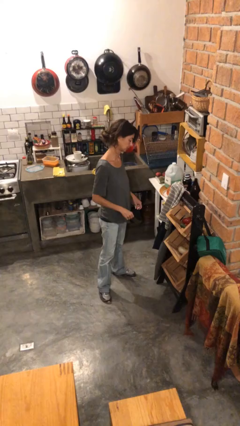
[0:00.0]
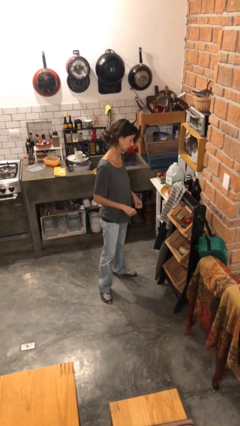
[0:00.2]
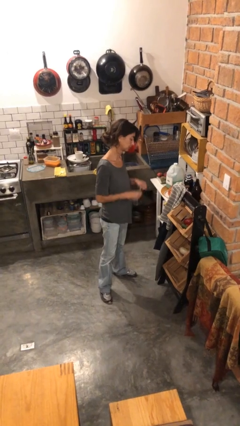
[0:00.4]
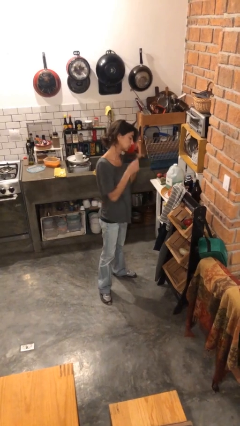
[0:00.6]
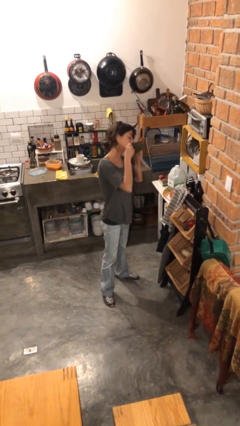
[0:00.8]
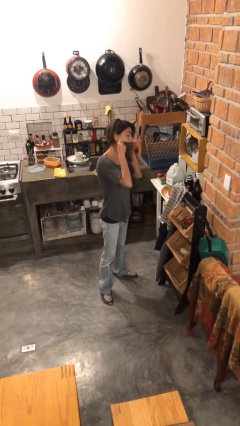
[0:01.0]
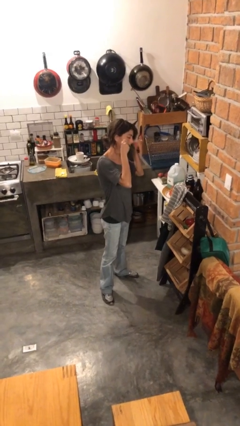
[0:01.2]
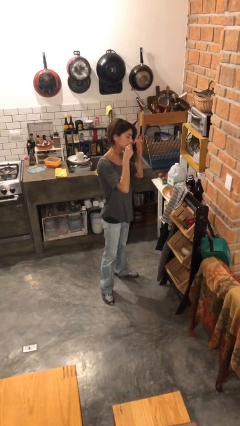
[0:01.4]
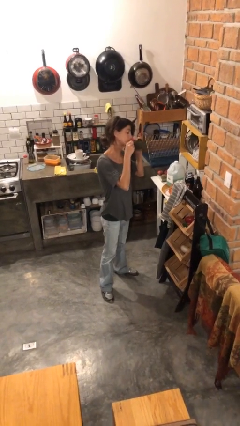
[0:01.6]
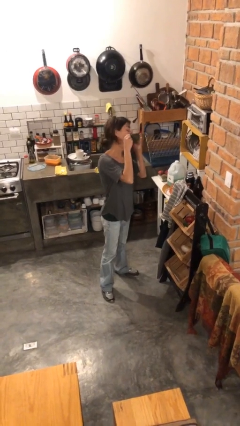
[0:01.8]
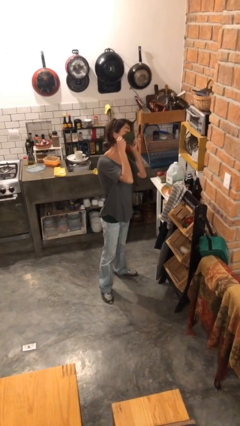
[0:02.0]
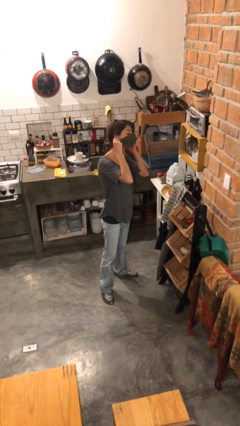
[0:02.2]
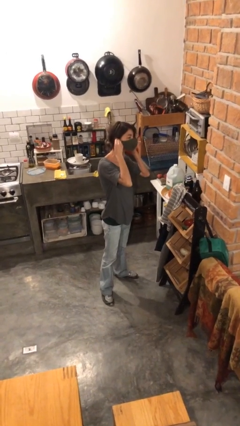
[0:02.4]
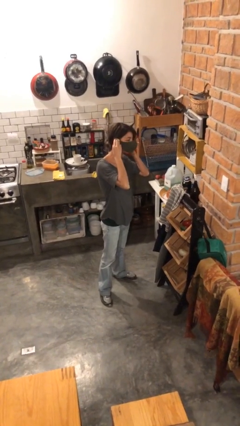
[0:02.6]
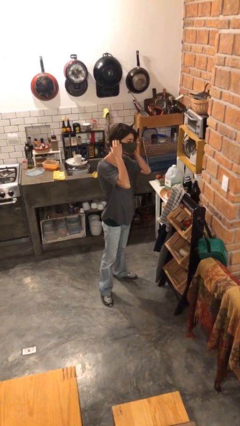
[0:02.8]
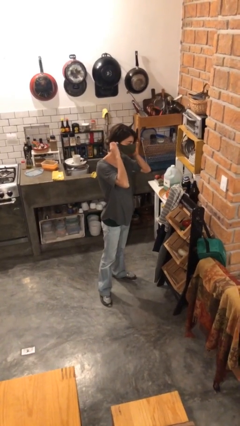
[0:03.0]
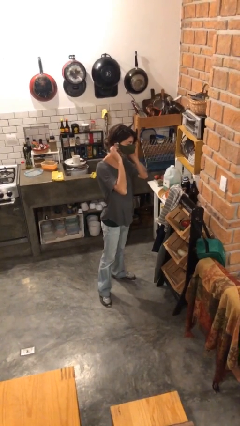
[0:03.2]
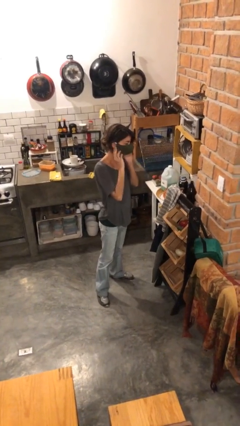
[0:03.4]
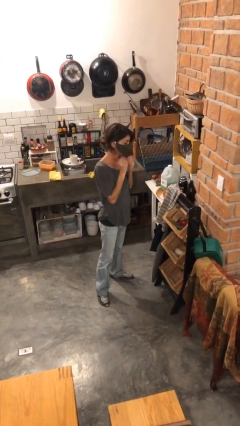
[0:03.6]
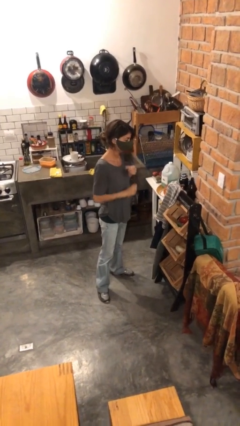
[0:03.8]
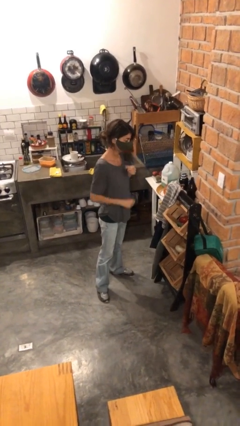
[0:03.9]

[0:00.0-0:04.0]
person puts on facemask

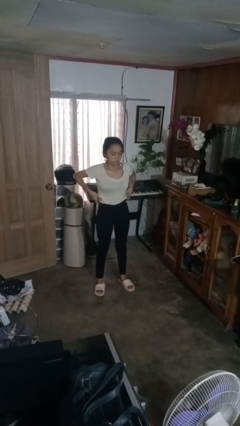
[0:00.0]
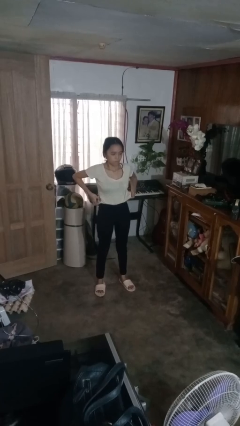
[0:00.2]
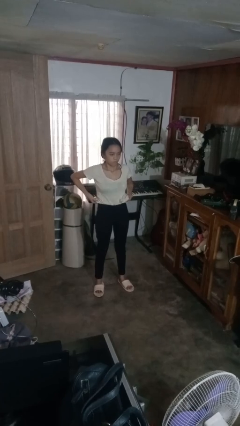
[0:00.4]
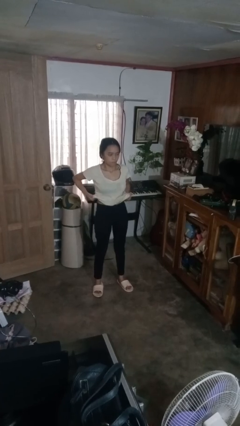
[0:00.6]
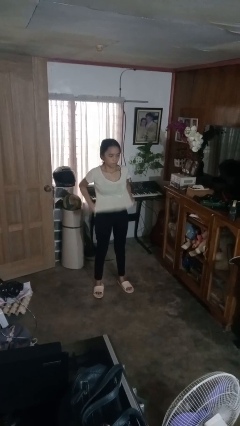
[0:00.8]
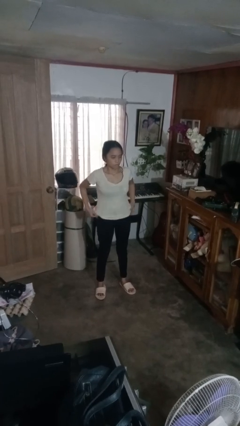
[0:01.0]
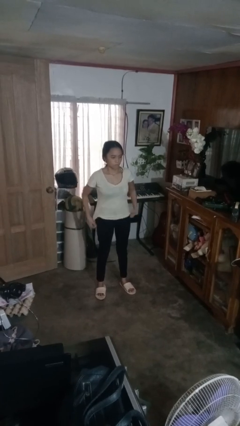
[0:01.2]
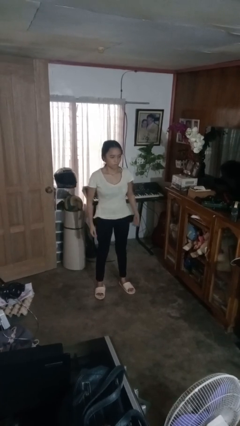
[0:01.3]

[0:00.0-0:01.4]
person untucks shirt

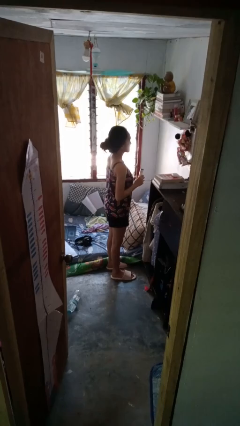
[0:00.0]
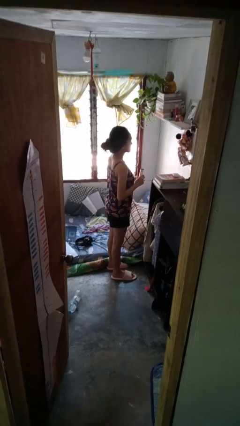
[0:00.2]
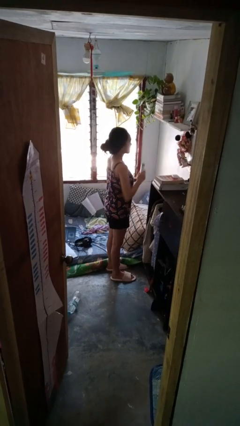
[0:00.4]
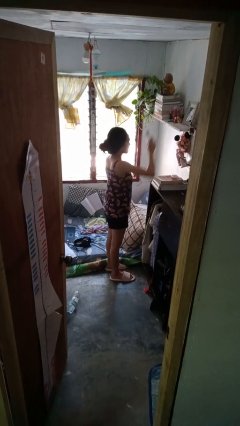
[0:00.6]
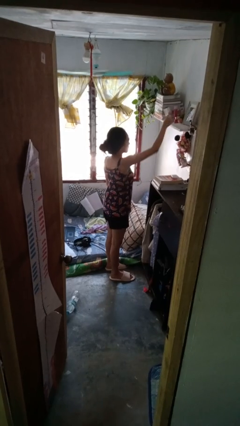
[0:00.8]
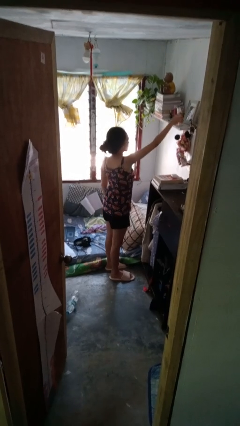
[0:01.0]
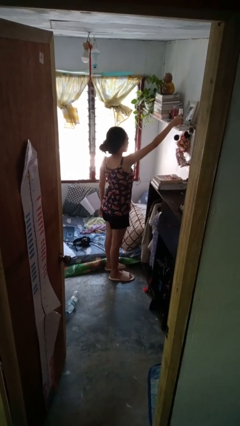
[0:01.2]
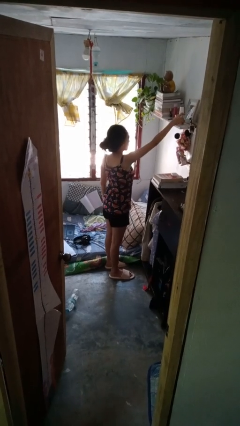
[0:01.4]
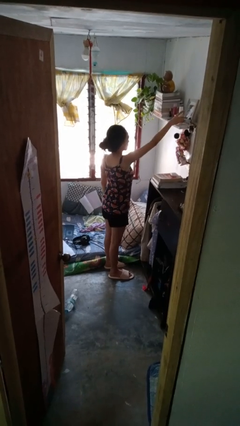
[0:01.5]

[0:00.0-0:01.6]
person puts down object on shelf

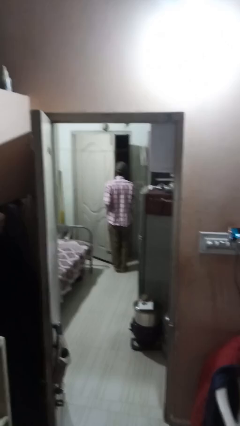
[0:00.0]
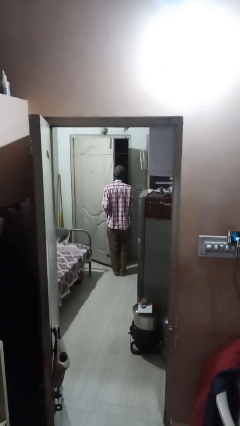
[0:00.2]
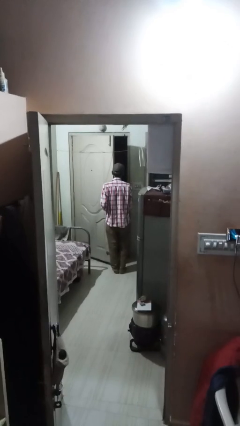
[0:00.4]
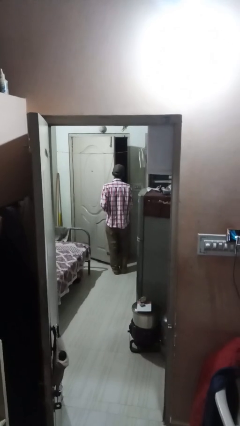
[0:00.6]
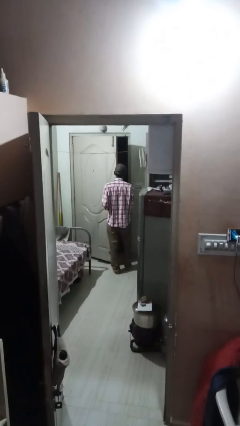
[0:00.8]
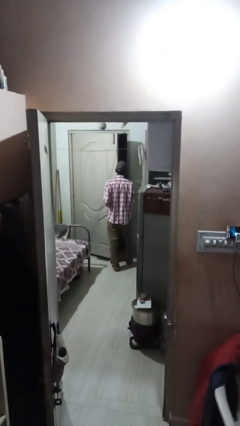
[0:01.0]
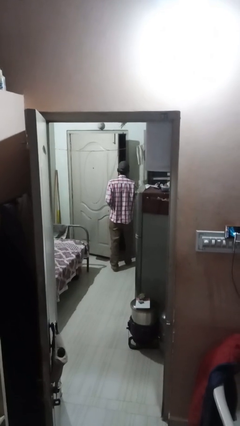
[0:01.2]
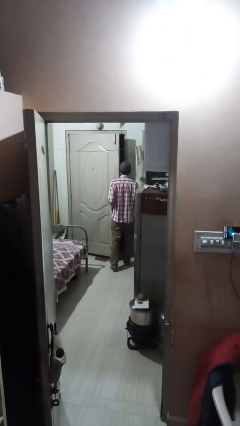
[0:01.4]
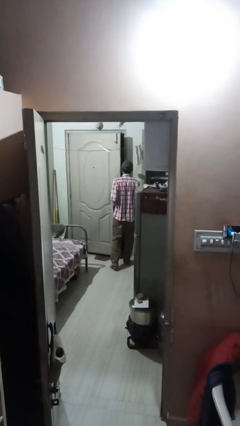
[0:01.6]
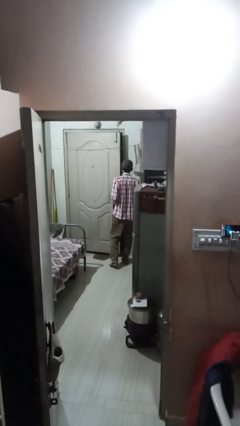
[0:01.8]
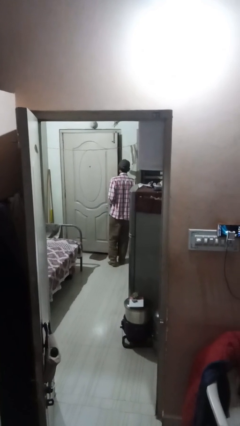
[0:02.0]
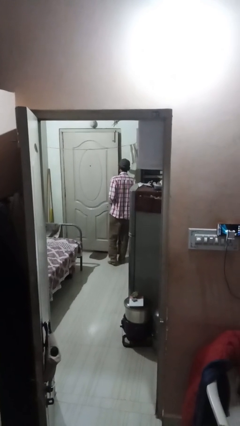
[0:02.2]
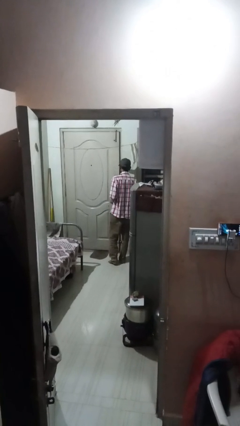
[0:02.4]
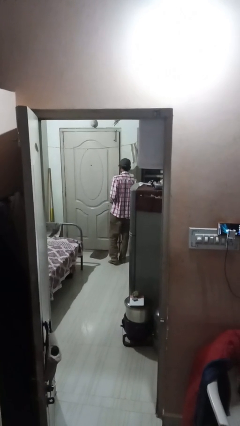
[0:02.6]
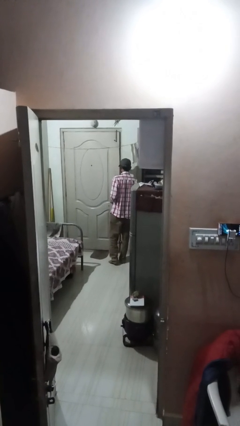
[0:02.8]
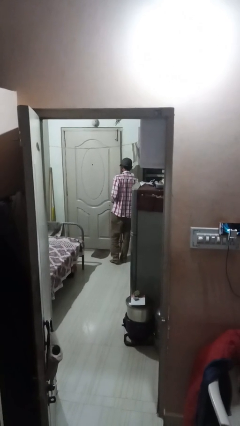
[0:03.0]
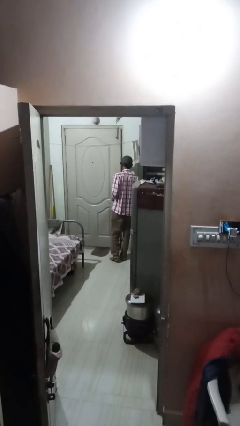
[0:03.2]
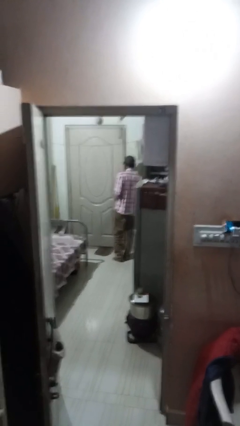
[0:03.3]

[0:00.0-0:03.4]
person closes facility door

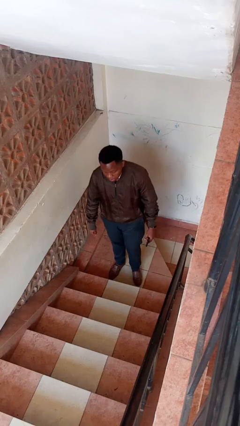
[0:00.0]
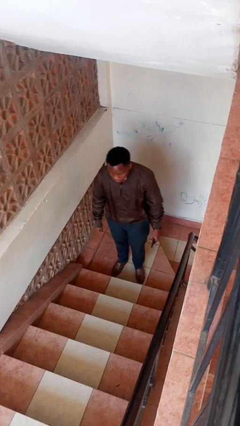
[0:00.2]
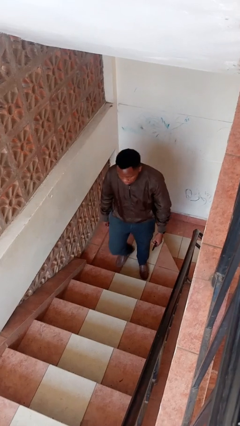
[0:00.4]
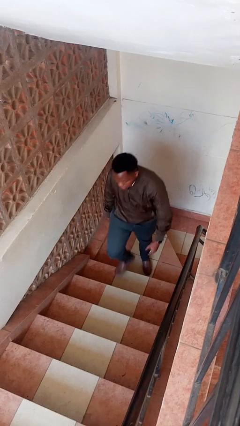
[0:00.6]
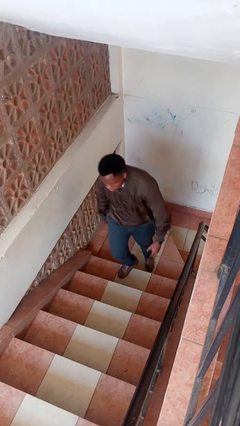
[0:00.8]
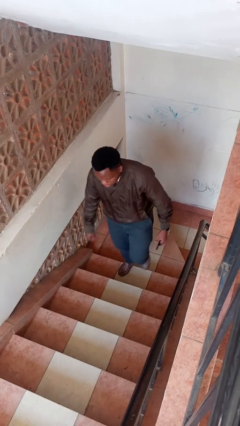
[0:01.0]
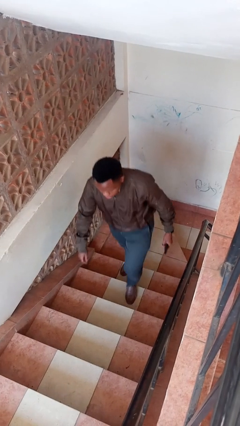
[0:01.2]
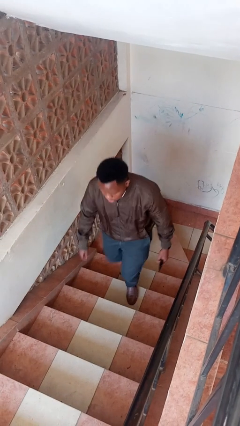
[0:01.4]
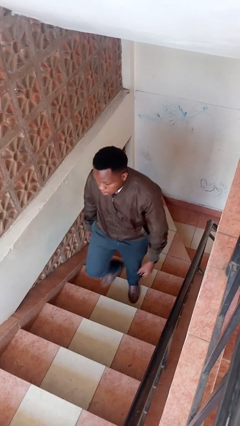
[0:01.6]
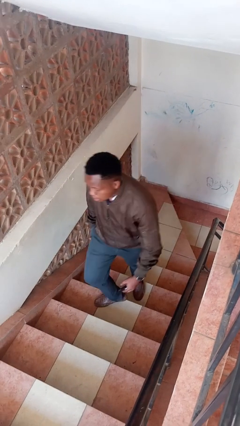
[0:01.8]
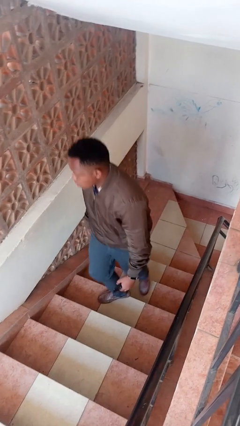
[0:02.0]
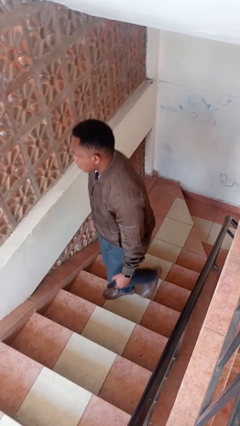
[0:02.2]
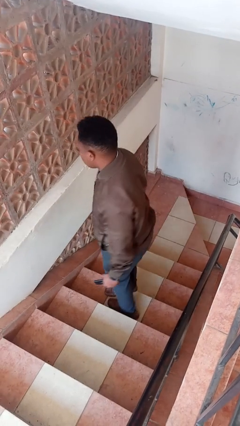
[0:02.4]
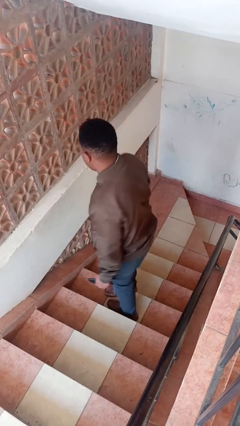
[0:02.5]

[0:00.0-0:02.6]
person climbs up stairs

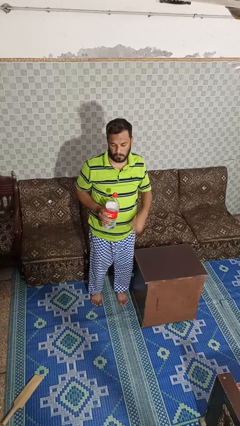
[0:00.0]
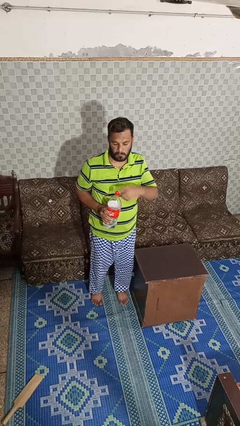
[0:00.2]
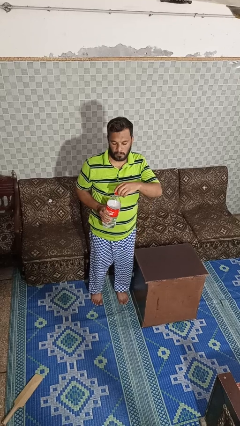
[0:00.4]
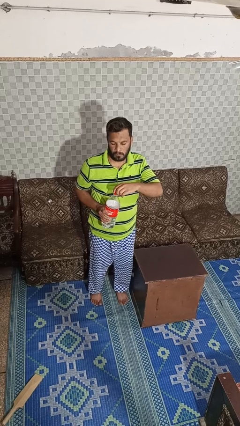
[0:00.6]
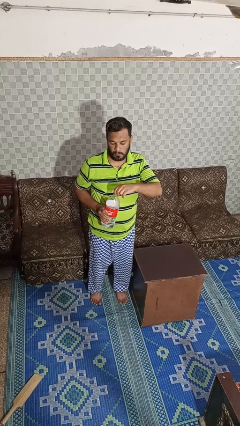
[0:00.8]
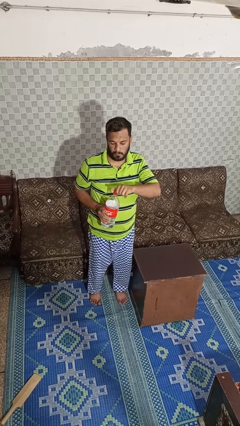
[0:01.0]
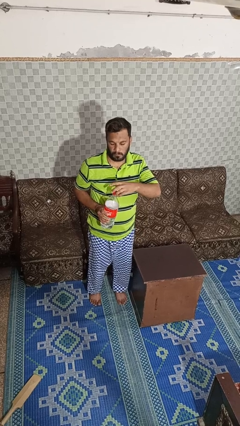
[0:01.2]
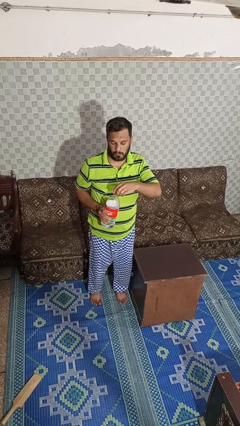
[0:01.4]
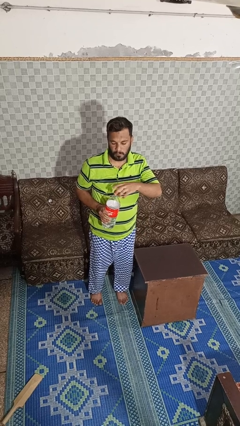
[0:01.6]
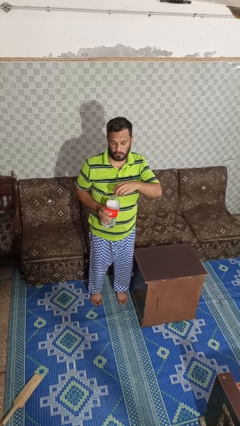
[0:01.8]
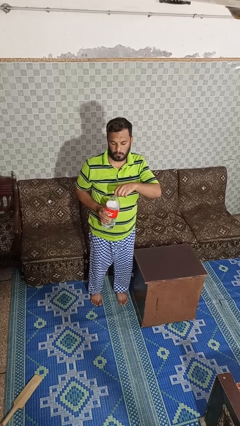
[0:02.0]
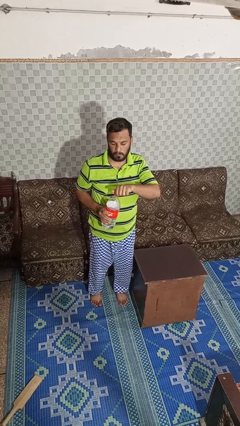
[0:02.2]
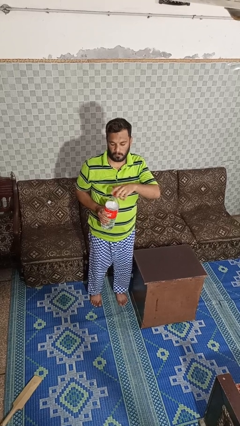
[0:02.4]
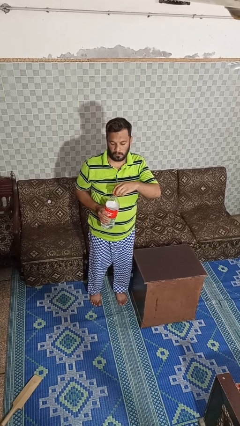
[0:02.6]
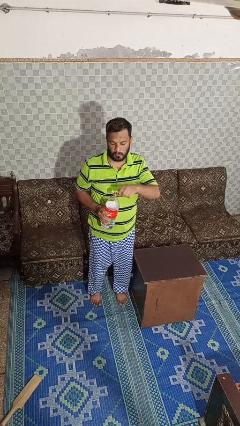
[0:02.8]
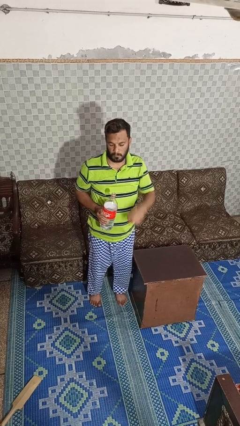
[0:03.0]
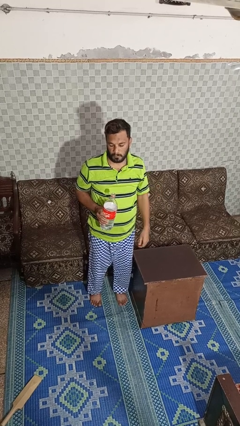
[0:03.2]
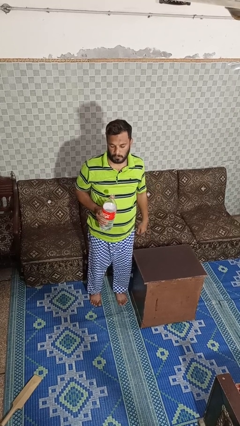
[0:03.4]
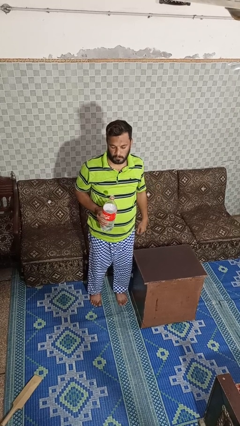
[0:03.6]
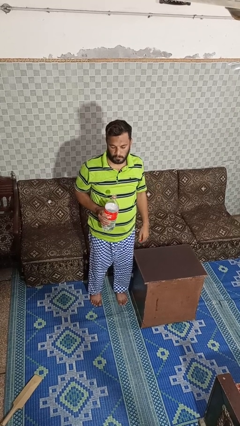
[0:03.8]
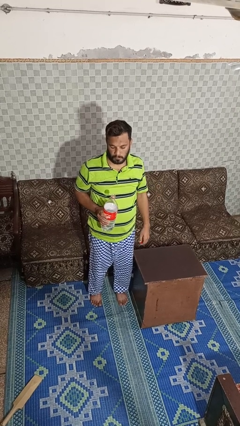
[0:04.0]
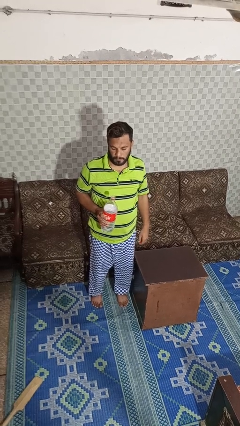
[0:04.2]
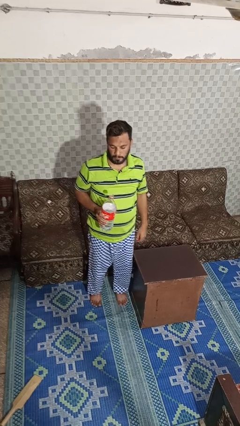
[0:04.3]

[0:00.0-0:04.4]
person unscrews lid from bottle
